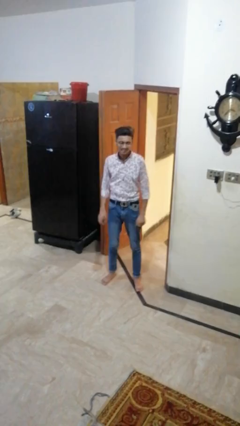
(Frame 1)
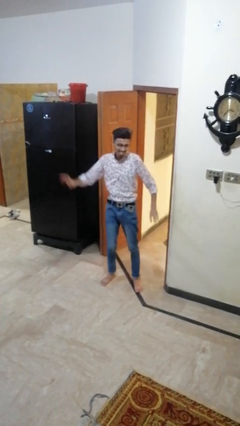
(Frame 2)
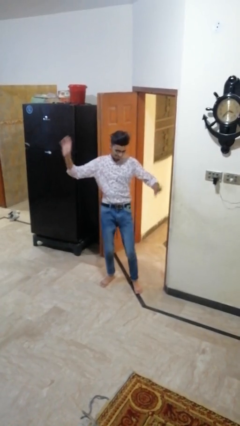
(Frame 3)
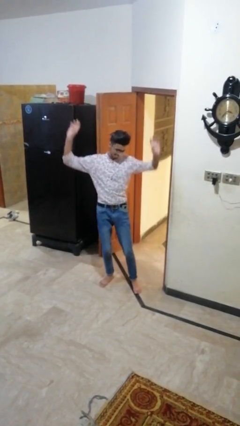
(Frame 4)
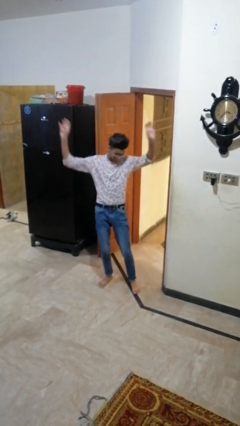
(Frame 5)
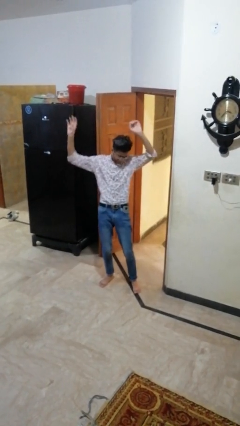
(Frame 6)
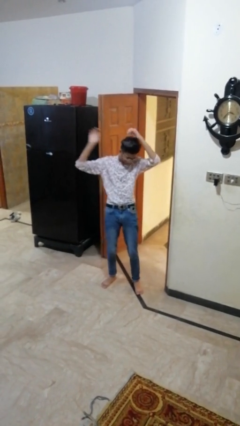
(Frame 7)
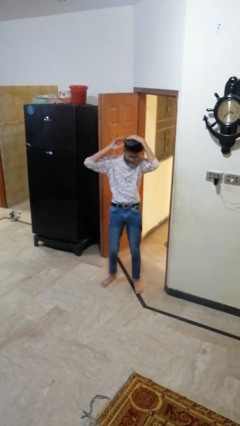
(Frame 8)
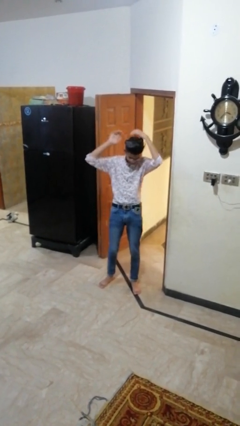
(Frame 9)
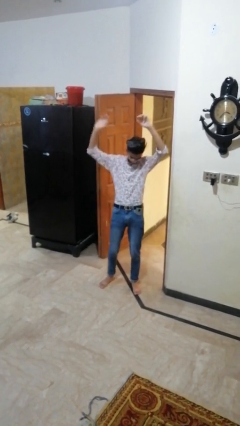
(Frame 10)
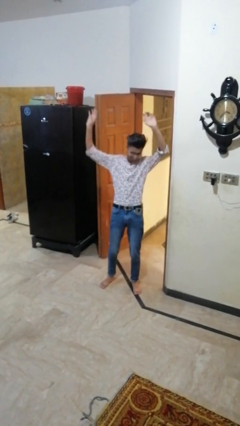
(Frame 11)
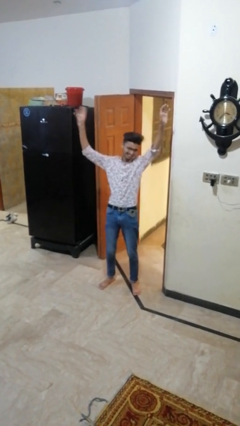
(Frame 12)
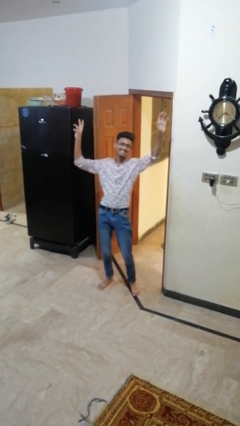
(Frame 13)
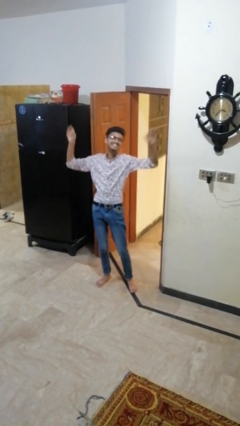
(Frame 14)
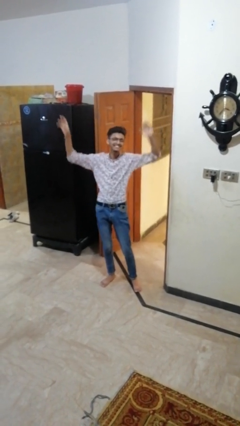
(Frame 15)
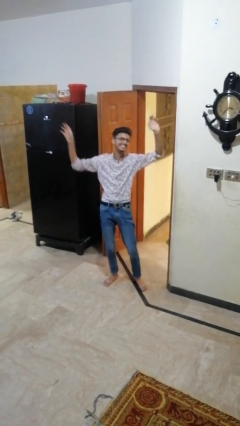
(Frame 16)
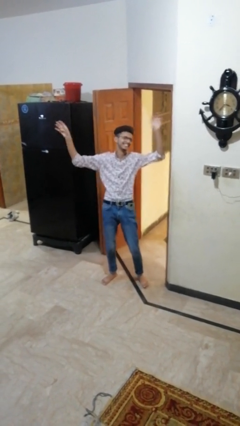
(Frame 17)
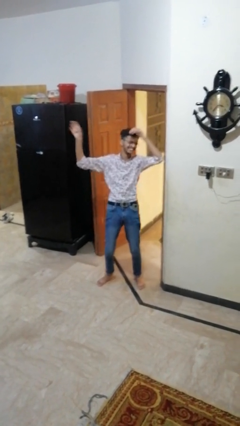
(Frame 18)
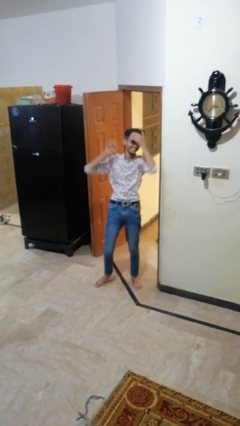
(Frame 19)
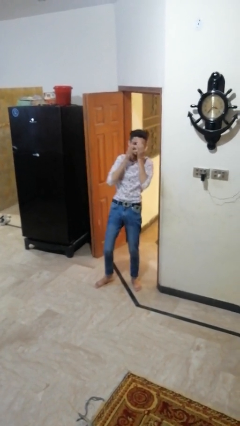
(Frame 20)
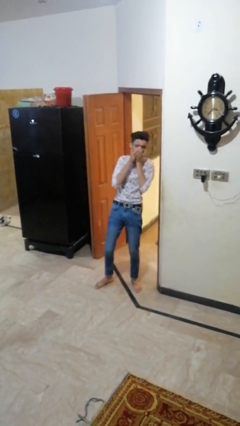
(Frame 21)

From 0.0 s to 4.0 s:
person dances in place

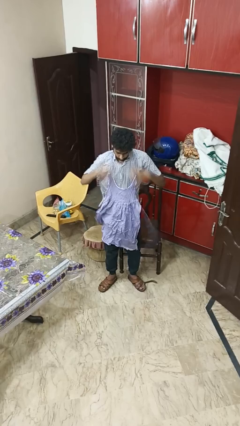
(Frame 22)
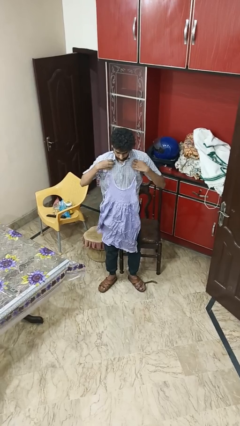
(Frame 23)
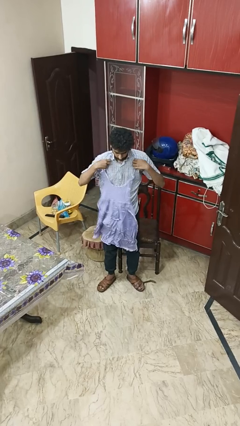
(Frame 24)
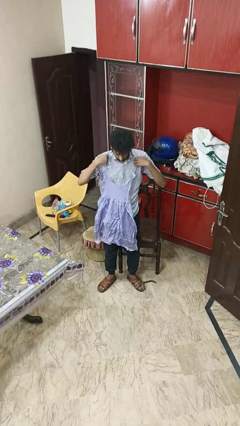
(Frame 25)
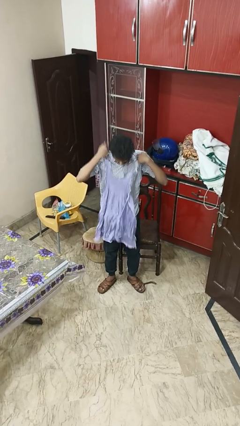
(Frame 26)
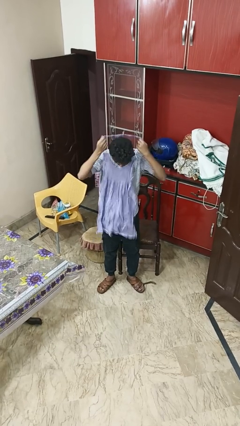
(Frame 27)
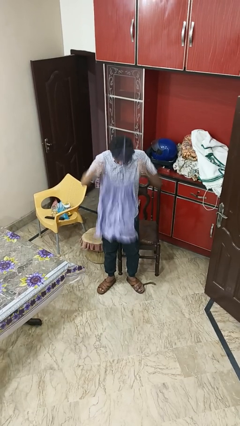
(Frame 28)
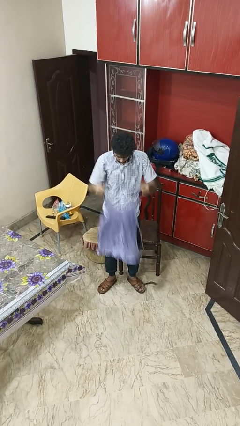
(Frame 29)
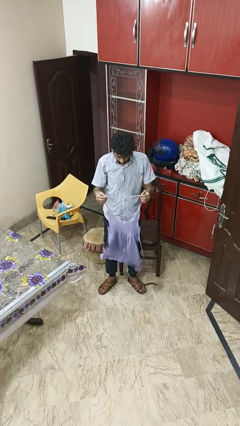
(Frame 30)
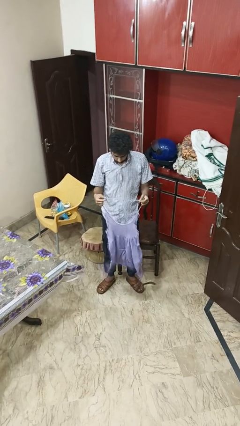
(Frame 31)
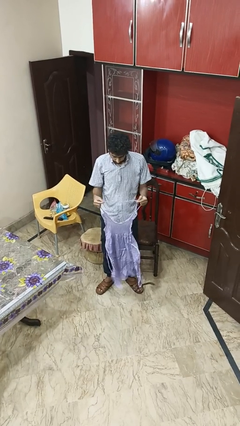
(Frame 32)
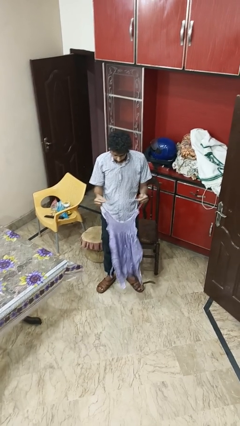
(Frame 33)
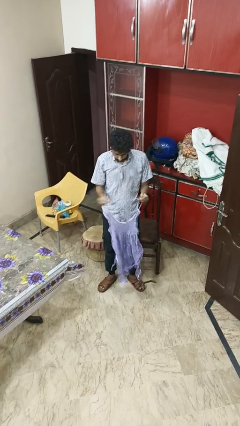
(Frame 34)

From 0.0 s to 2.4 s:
person takes off apron

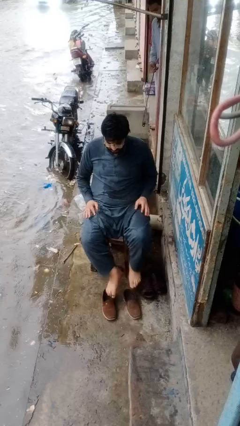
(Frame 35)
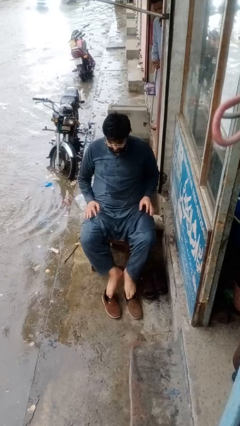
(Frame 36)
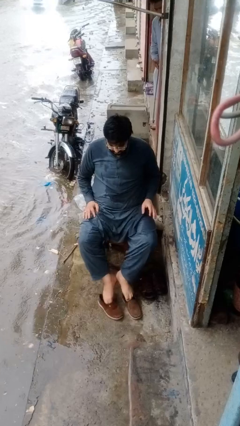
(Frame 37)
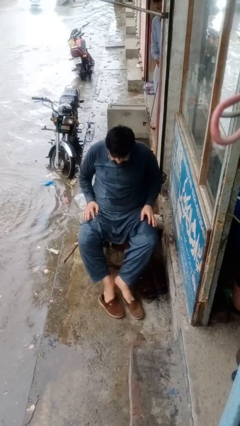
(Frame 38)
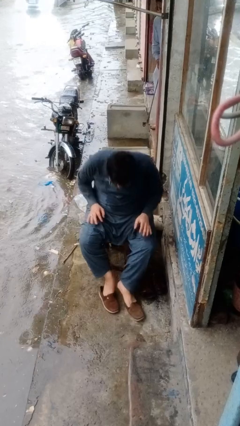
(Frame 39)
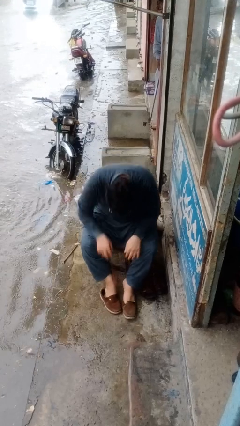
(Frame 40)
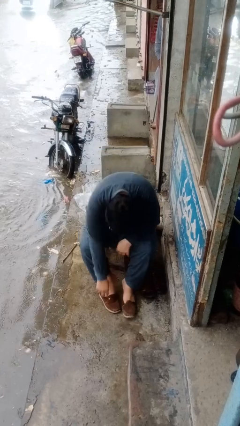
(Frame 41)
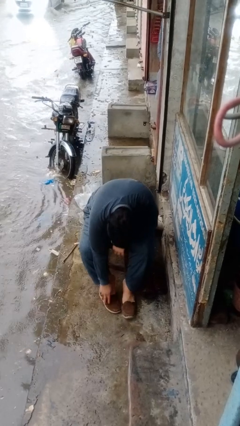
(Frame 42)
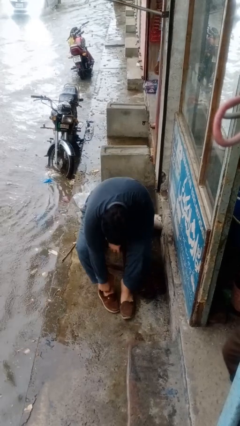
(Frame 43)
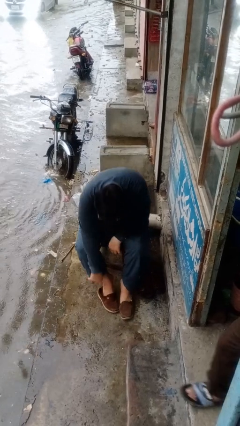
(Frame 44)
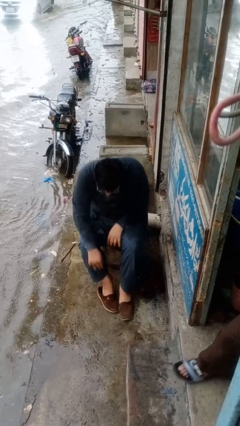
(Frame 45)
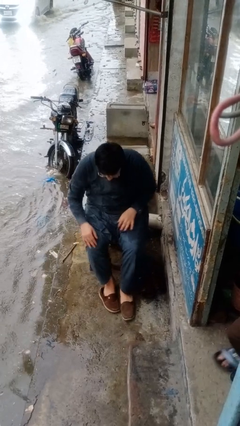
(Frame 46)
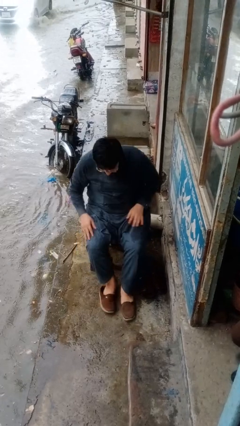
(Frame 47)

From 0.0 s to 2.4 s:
person puts on shoes

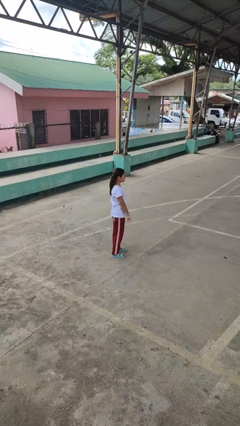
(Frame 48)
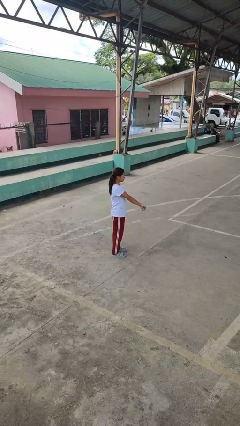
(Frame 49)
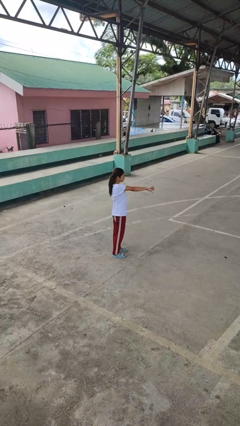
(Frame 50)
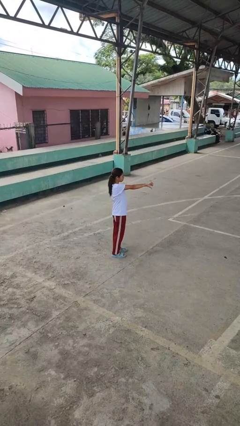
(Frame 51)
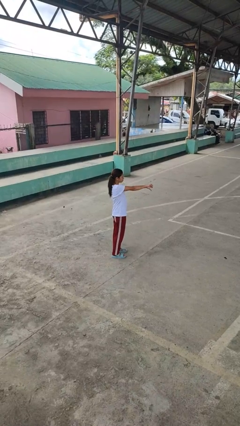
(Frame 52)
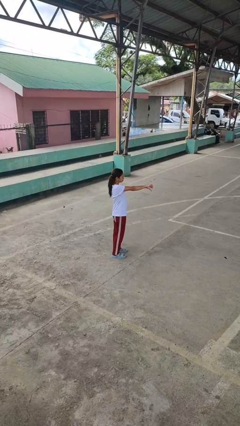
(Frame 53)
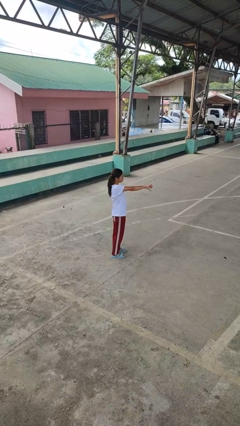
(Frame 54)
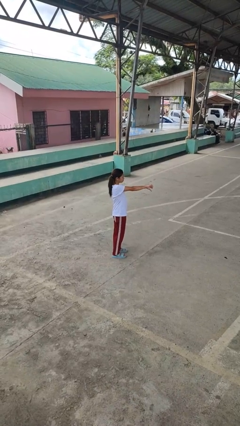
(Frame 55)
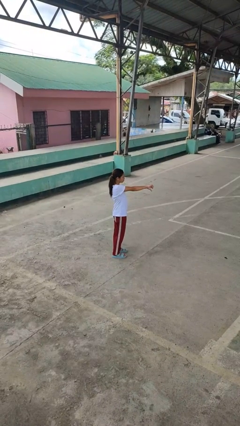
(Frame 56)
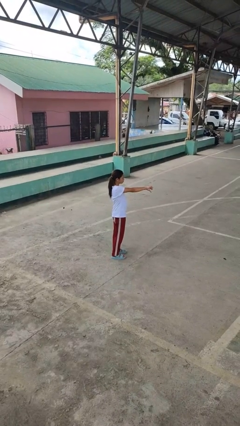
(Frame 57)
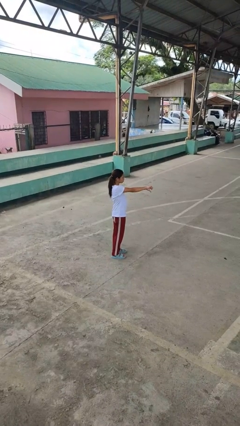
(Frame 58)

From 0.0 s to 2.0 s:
person gestures thumbs down

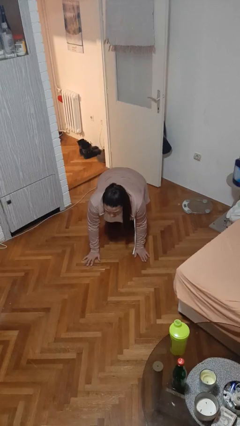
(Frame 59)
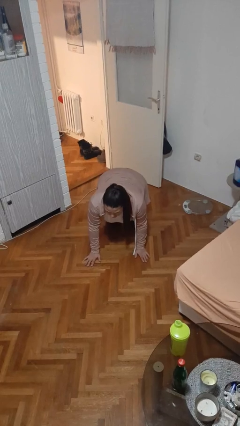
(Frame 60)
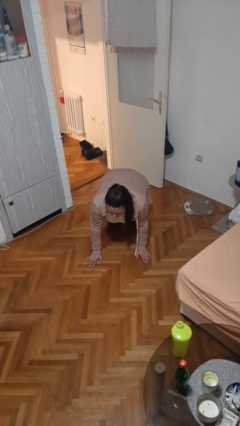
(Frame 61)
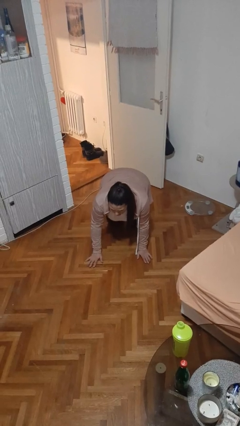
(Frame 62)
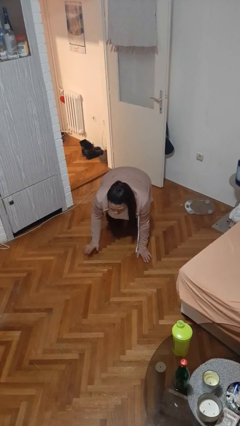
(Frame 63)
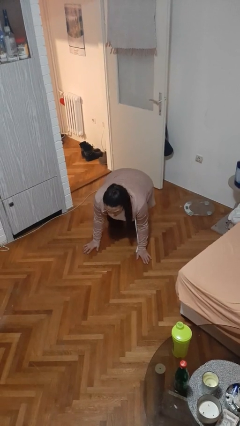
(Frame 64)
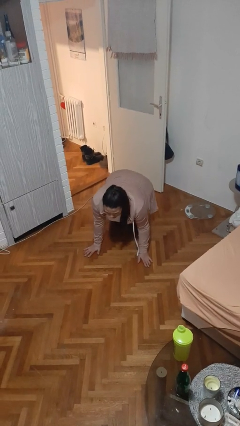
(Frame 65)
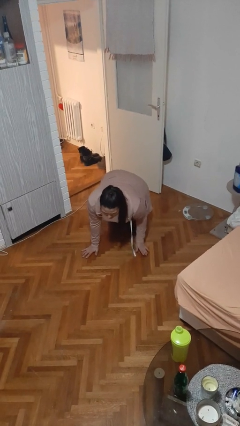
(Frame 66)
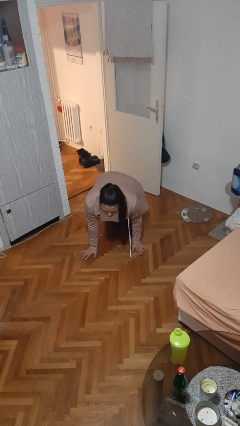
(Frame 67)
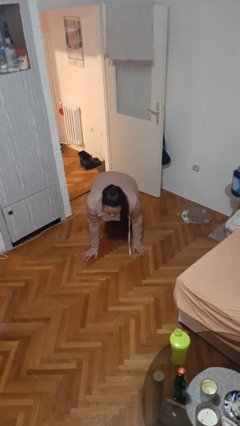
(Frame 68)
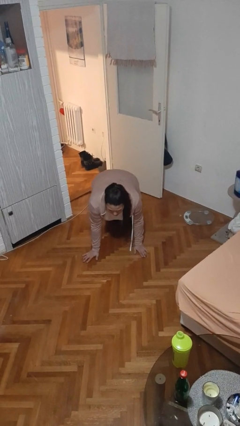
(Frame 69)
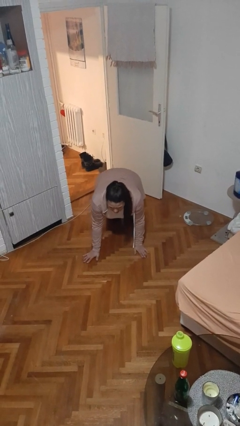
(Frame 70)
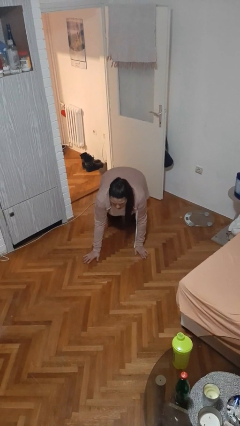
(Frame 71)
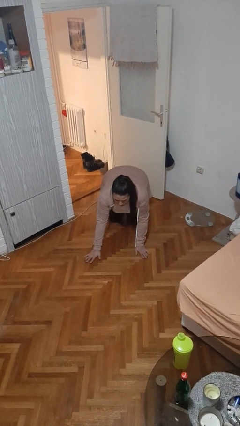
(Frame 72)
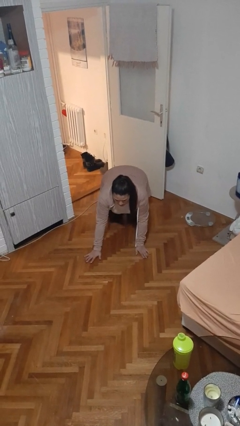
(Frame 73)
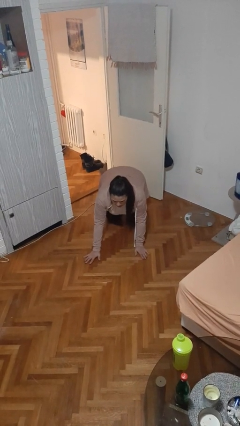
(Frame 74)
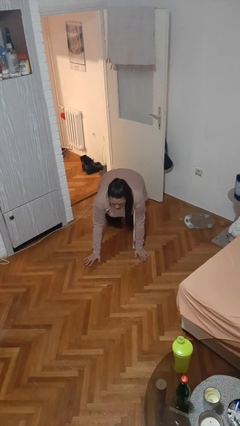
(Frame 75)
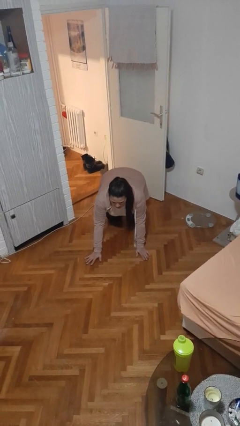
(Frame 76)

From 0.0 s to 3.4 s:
person crawls

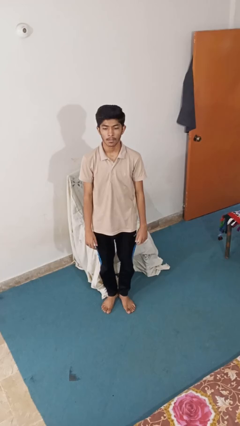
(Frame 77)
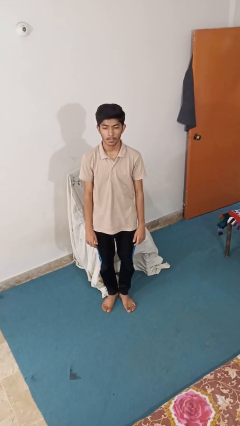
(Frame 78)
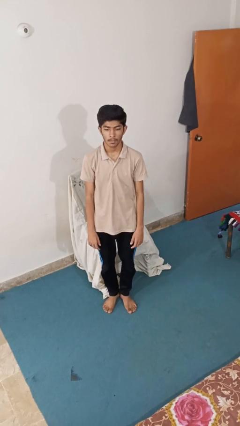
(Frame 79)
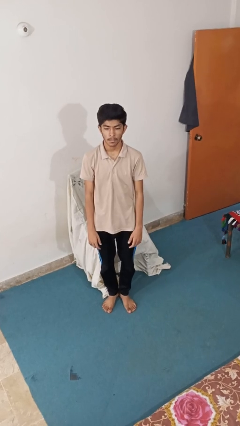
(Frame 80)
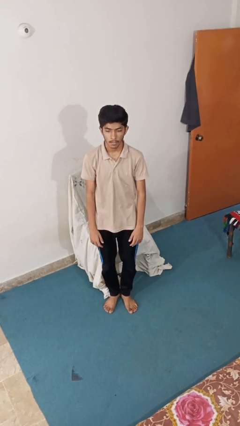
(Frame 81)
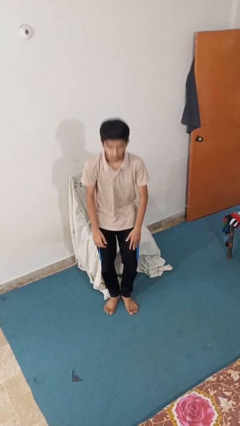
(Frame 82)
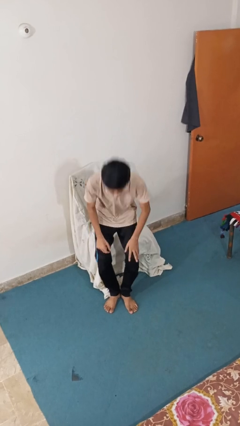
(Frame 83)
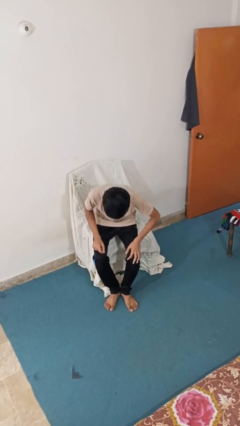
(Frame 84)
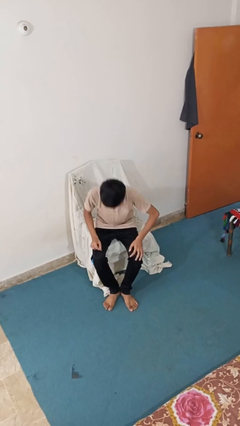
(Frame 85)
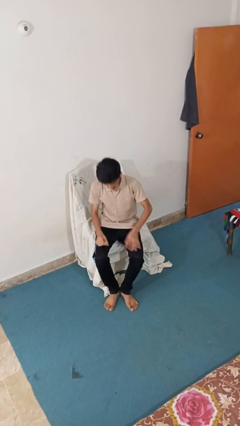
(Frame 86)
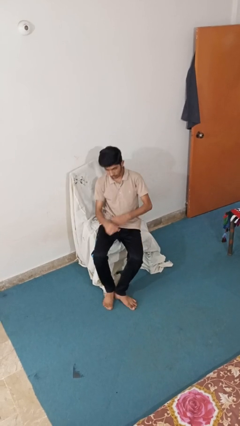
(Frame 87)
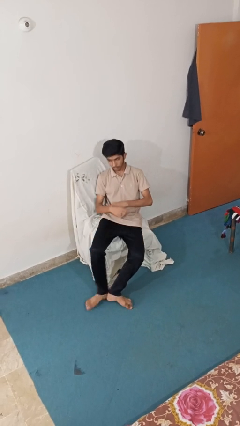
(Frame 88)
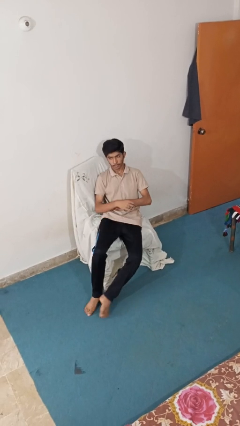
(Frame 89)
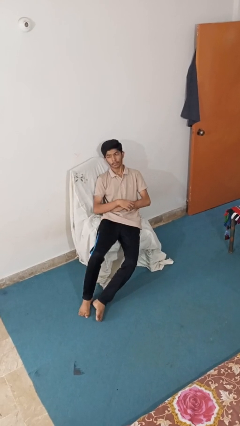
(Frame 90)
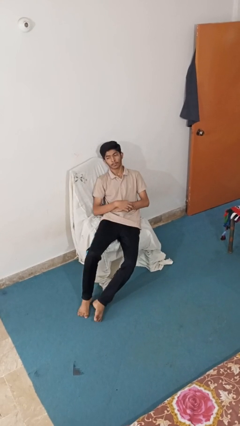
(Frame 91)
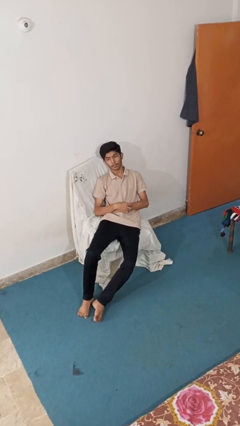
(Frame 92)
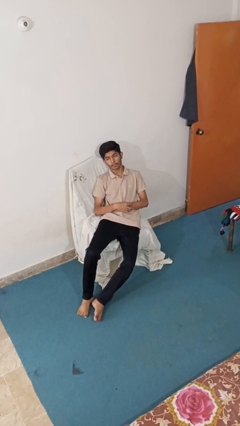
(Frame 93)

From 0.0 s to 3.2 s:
person lies down on couch

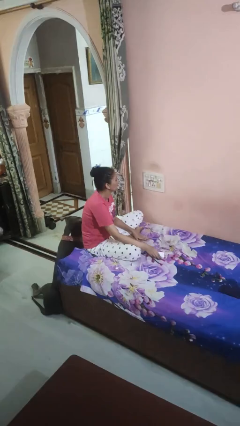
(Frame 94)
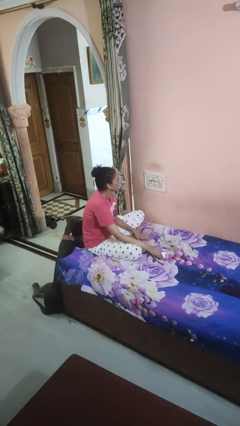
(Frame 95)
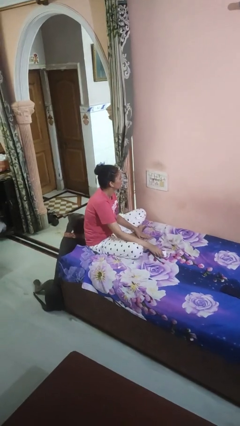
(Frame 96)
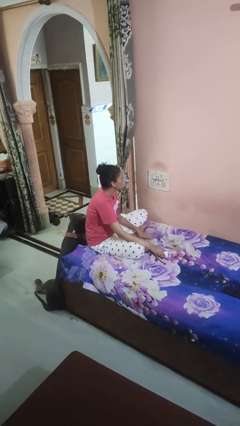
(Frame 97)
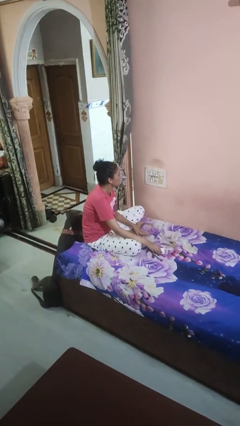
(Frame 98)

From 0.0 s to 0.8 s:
person unplugs from electrical socket
